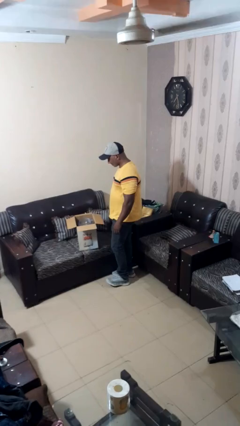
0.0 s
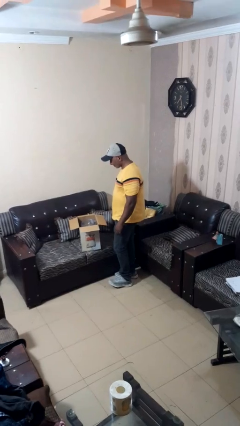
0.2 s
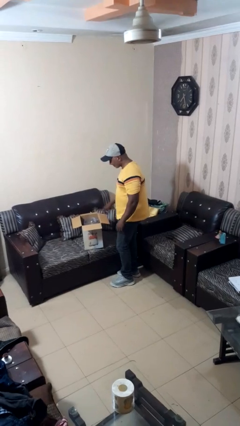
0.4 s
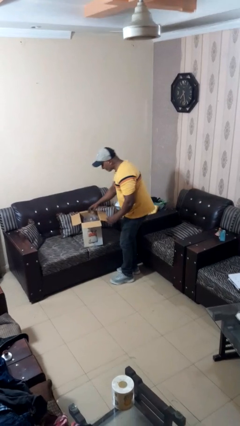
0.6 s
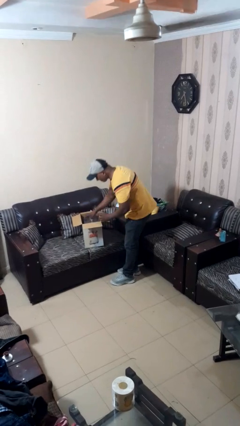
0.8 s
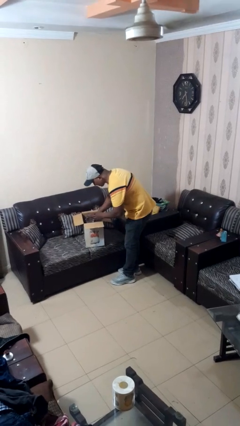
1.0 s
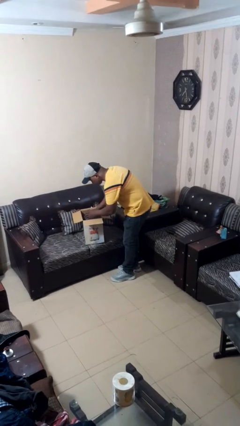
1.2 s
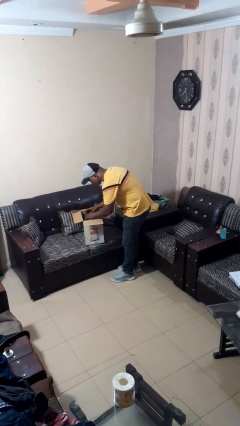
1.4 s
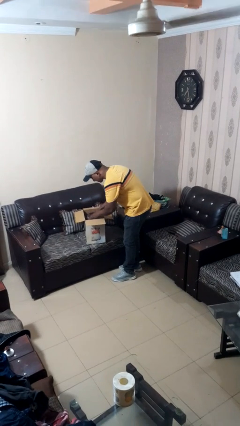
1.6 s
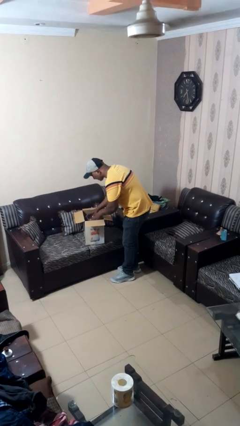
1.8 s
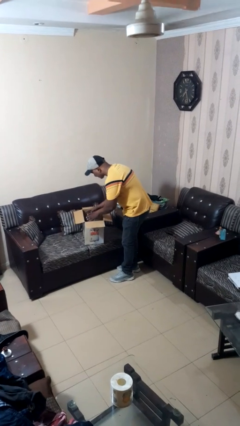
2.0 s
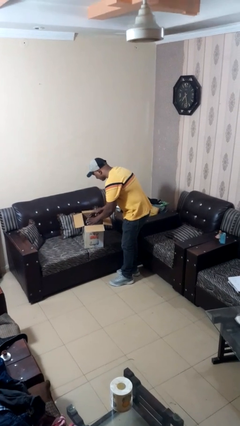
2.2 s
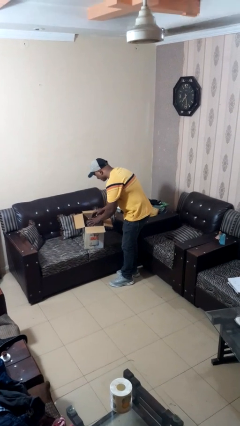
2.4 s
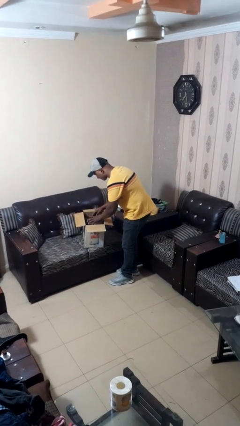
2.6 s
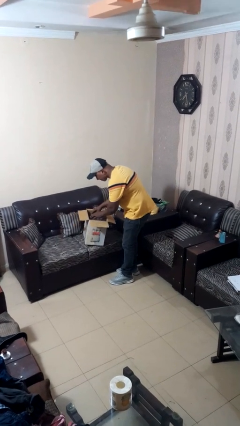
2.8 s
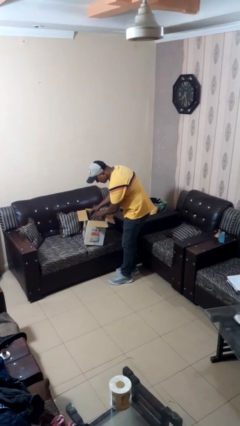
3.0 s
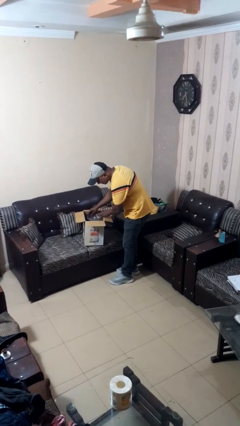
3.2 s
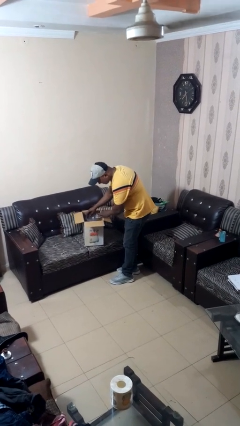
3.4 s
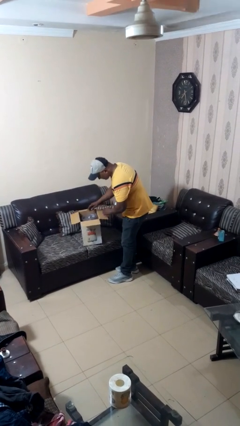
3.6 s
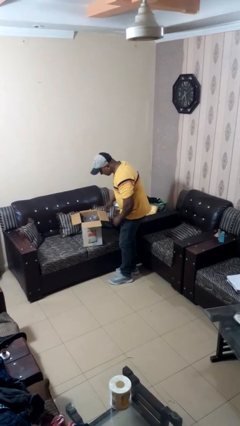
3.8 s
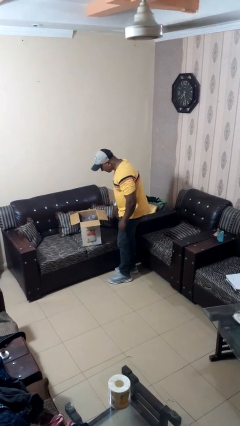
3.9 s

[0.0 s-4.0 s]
person searches in box

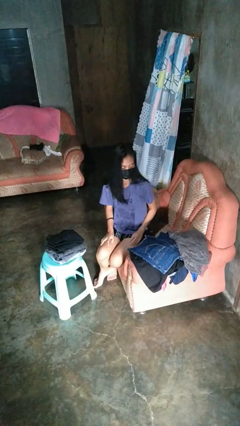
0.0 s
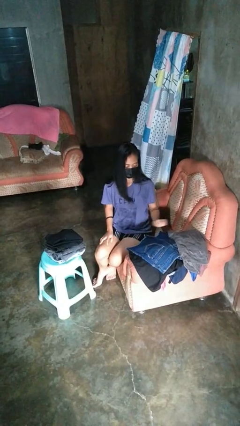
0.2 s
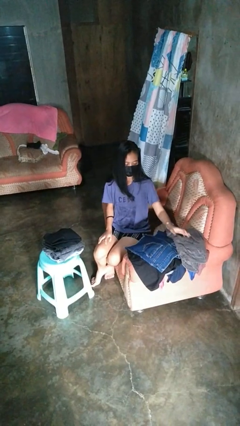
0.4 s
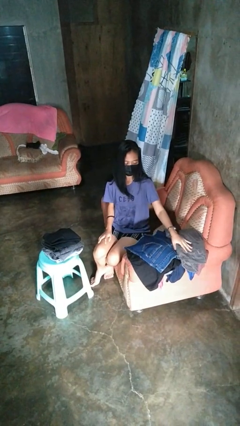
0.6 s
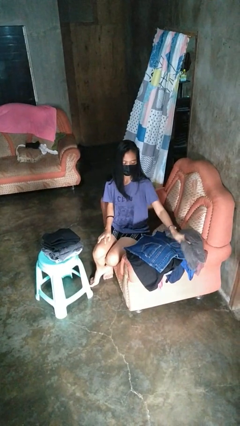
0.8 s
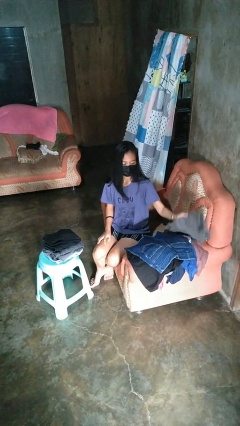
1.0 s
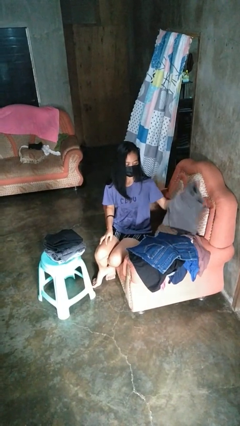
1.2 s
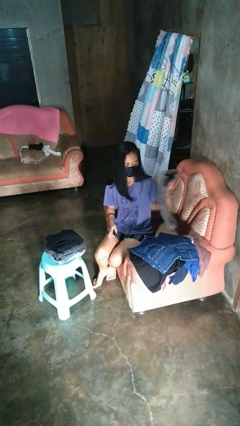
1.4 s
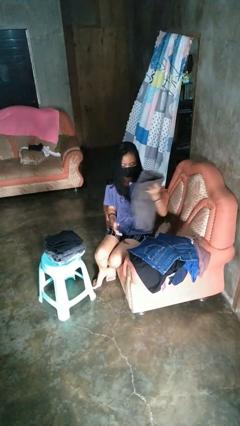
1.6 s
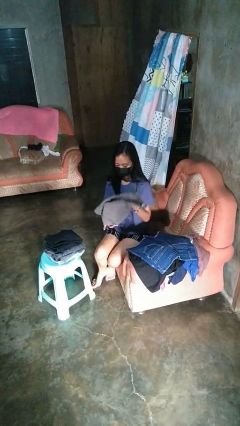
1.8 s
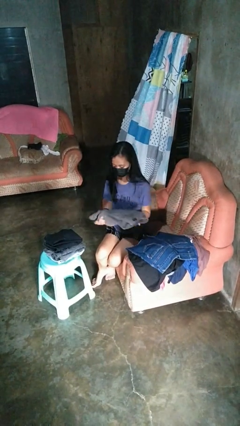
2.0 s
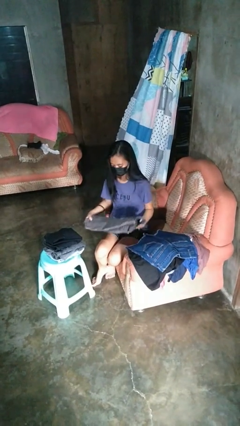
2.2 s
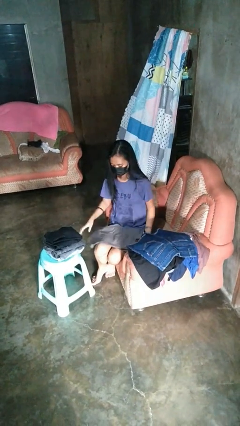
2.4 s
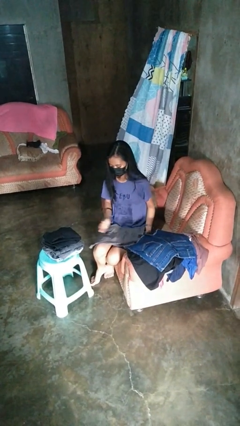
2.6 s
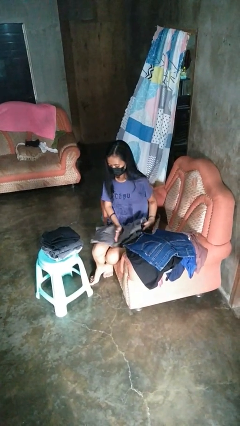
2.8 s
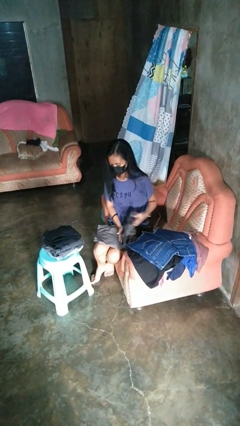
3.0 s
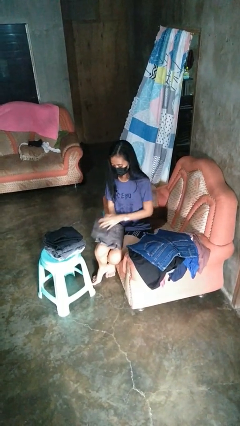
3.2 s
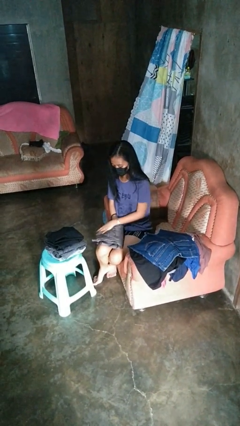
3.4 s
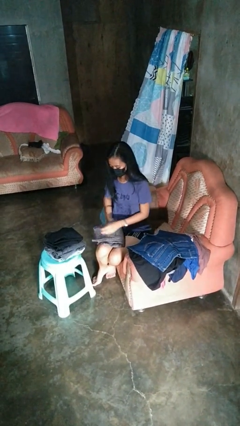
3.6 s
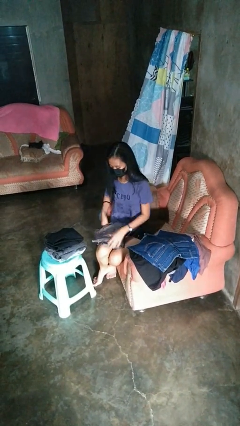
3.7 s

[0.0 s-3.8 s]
person folds pants

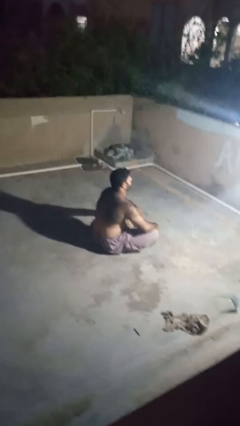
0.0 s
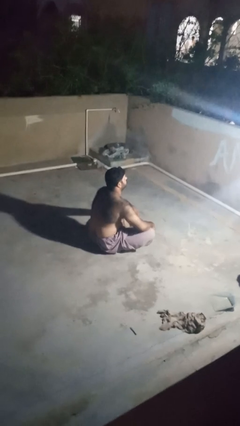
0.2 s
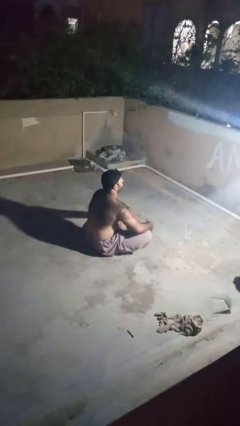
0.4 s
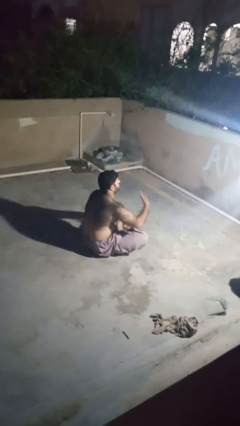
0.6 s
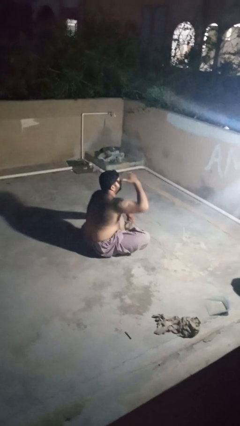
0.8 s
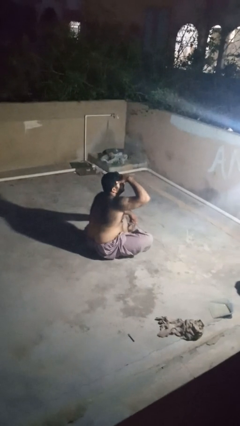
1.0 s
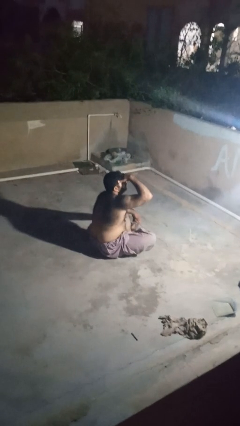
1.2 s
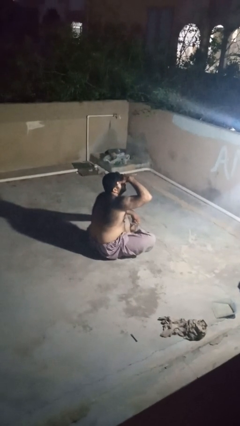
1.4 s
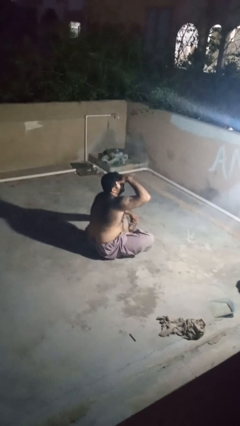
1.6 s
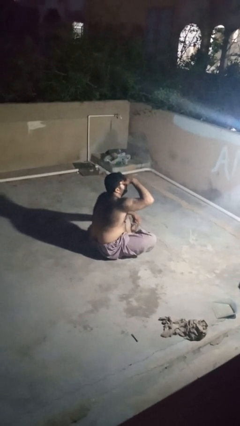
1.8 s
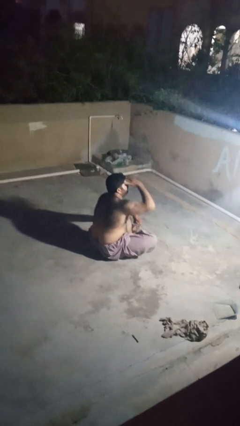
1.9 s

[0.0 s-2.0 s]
person shades eyes

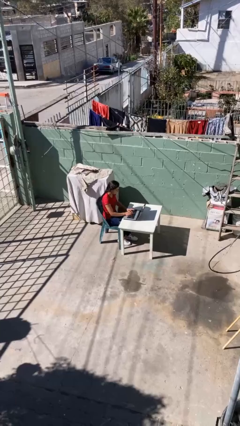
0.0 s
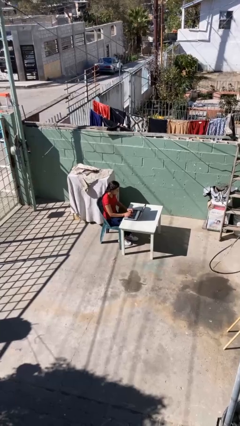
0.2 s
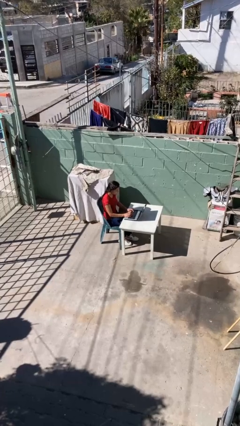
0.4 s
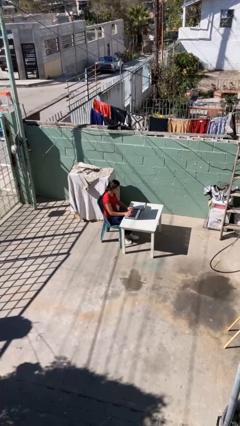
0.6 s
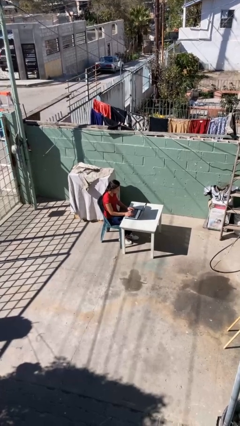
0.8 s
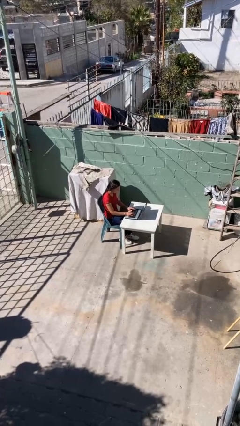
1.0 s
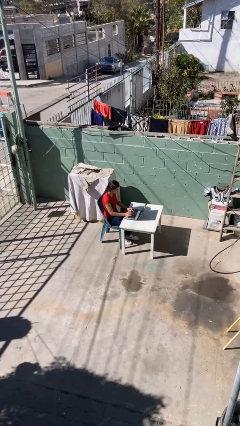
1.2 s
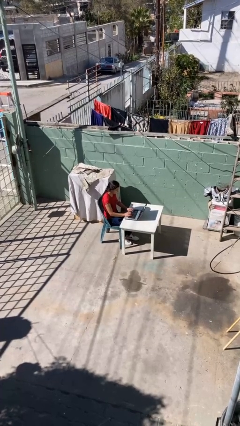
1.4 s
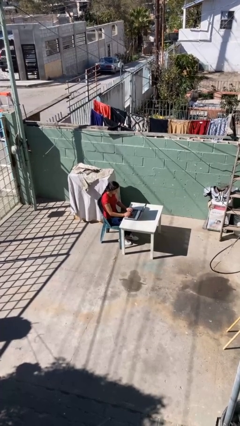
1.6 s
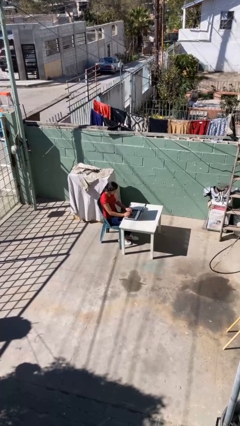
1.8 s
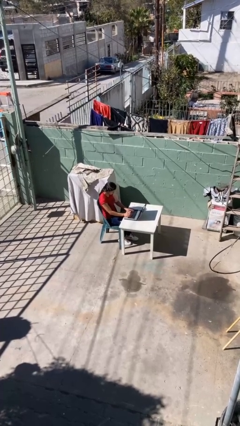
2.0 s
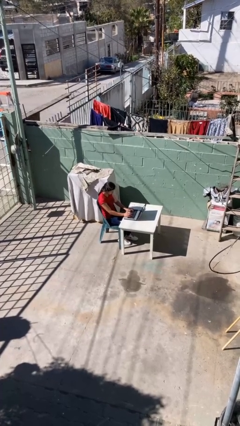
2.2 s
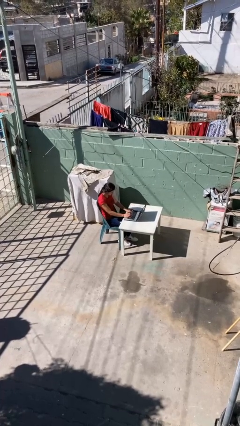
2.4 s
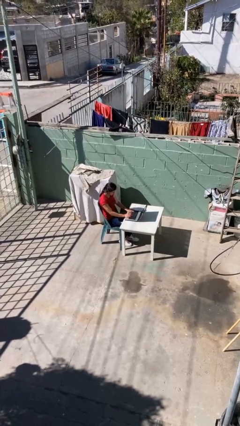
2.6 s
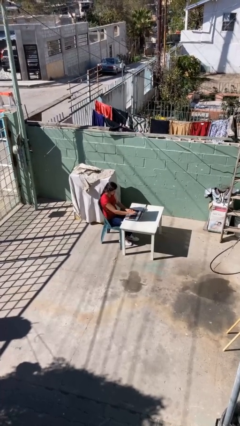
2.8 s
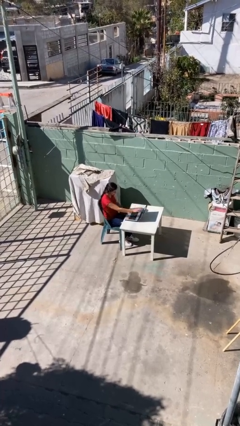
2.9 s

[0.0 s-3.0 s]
person interacts with laptop

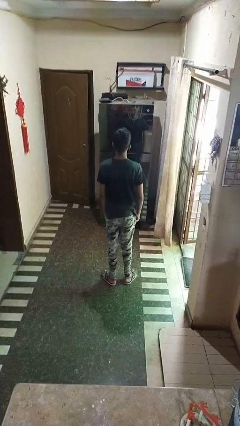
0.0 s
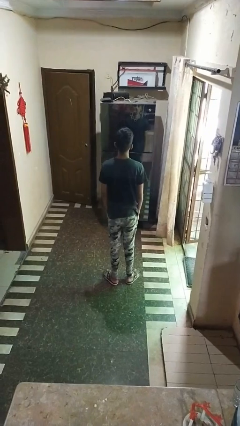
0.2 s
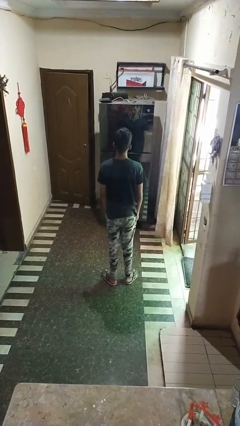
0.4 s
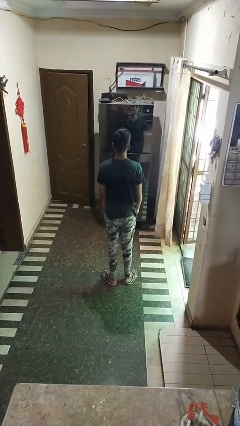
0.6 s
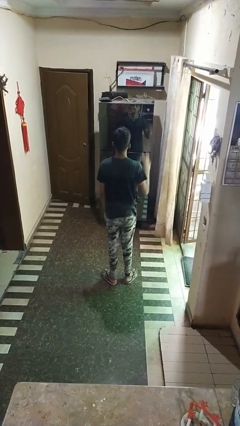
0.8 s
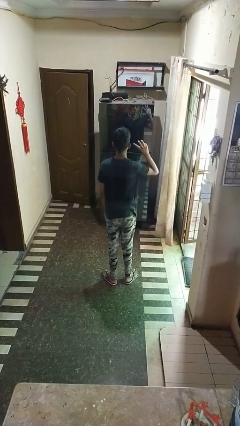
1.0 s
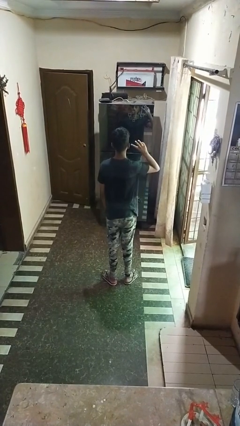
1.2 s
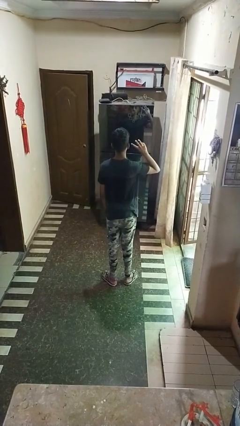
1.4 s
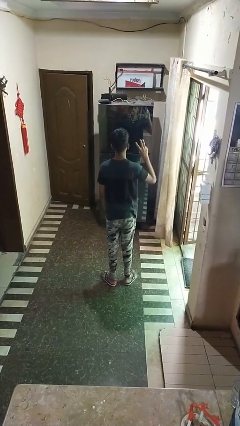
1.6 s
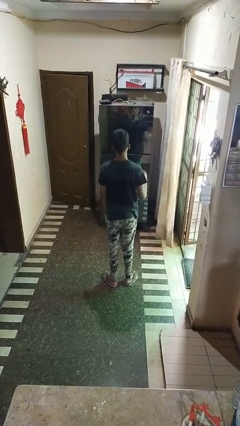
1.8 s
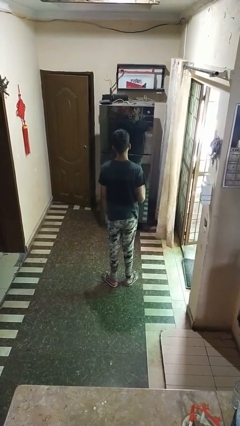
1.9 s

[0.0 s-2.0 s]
person gestures number three

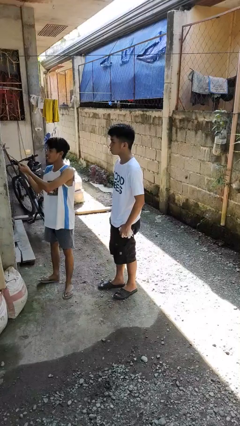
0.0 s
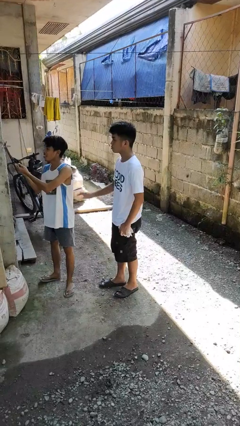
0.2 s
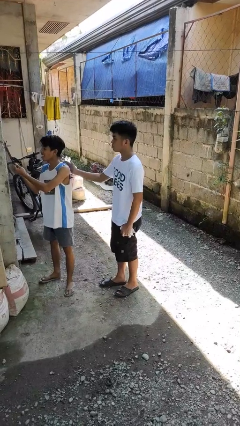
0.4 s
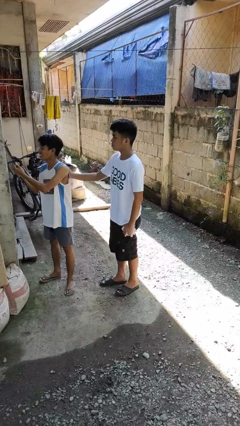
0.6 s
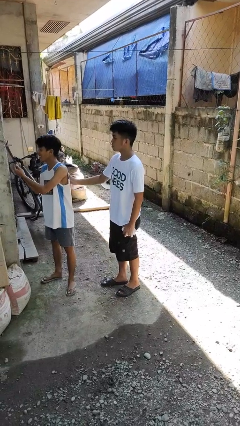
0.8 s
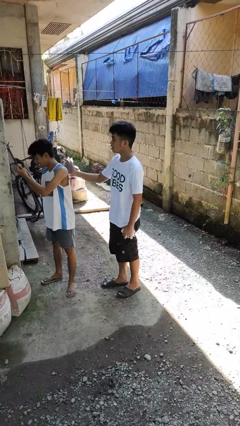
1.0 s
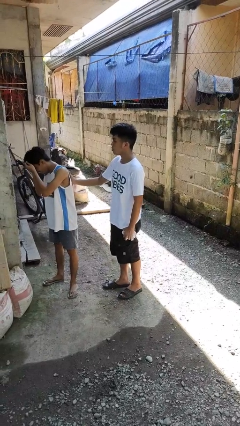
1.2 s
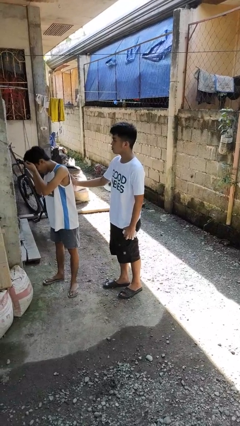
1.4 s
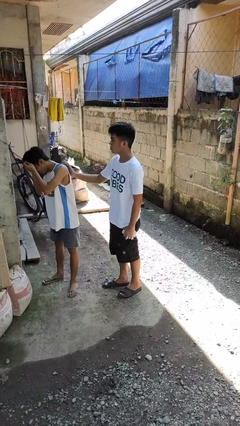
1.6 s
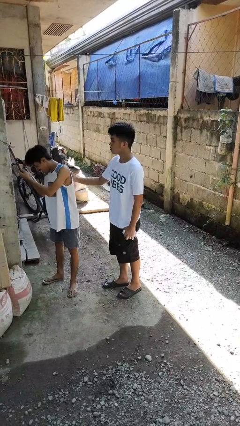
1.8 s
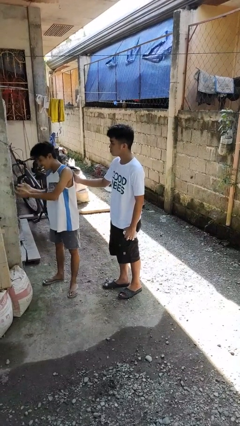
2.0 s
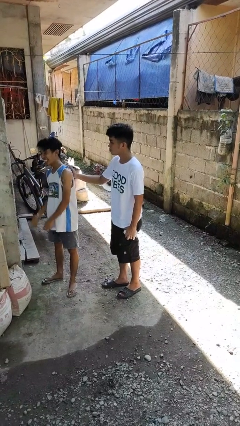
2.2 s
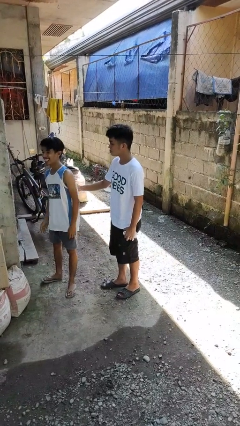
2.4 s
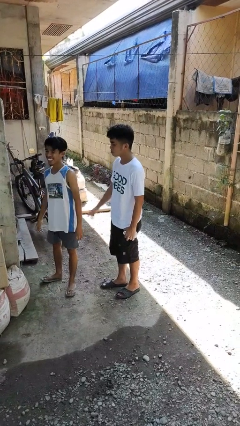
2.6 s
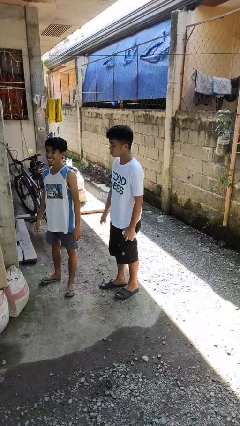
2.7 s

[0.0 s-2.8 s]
person touches back of person

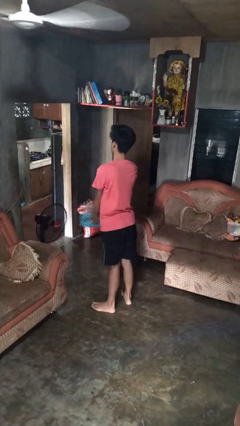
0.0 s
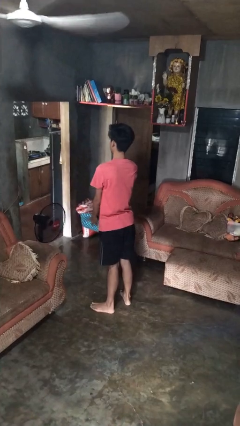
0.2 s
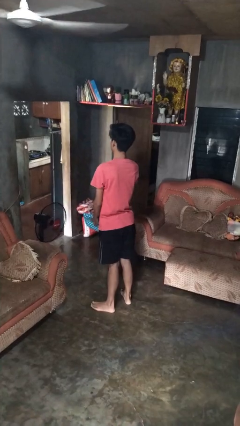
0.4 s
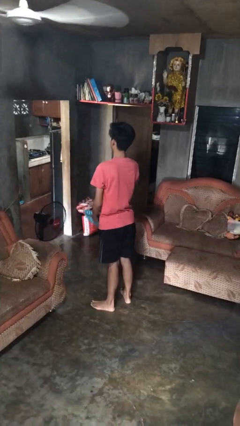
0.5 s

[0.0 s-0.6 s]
person catches dropped object
